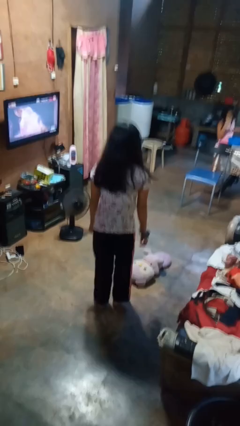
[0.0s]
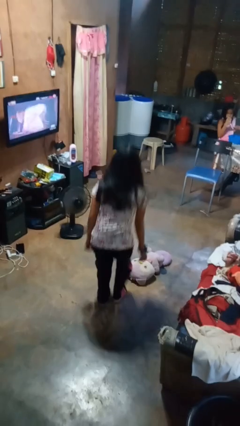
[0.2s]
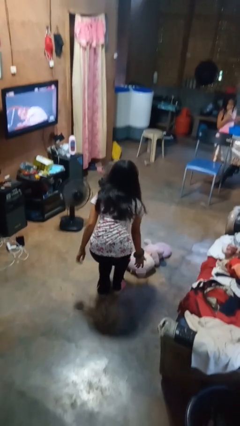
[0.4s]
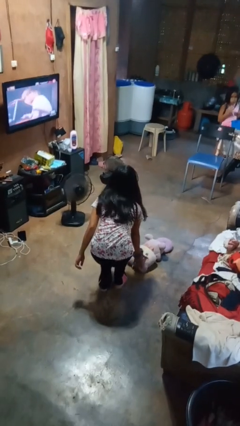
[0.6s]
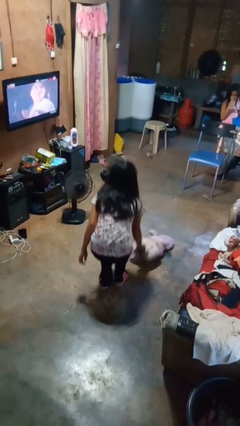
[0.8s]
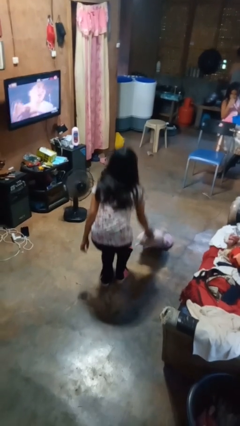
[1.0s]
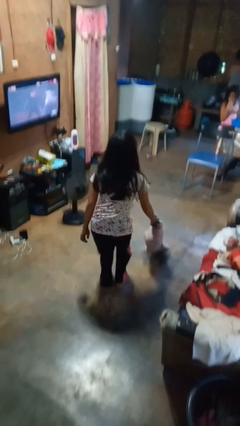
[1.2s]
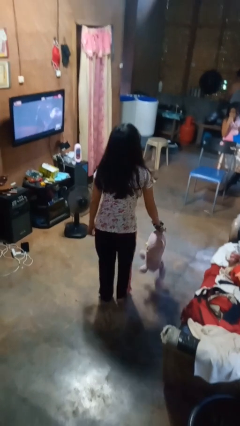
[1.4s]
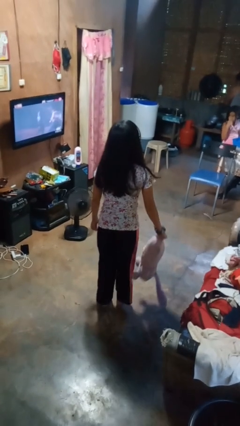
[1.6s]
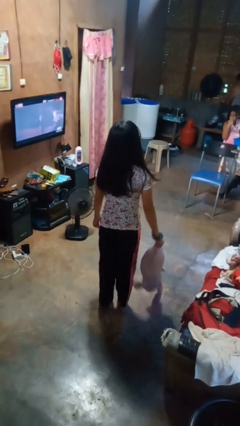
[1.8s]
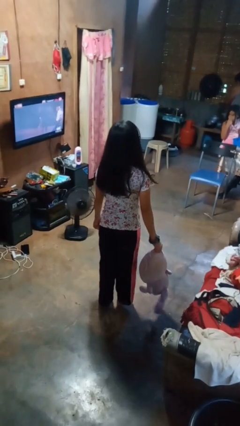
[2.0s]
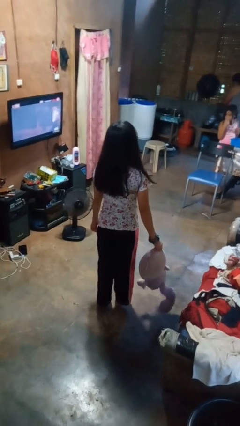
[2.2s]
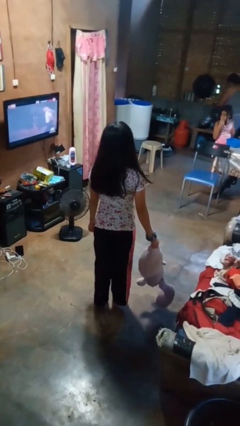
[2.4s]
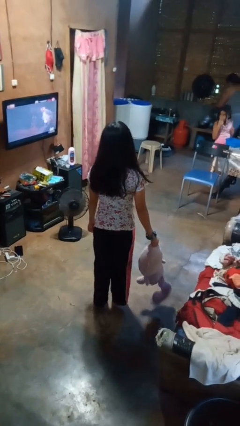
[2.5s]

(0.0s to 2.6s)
person picks up object from floor

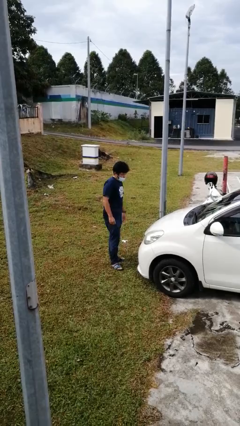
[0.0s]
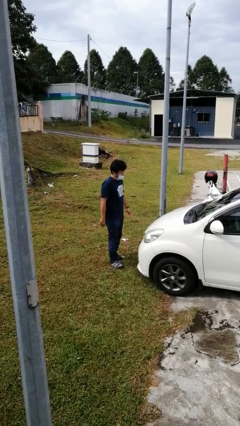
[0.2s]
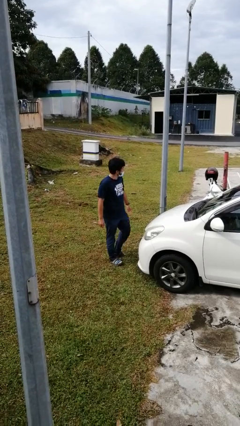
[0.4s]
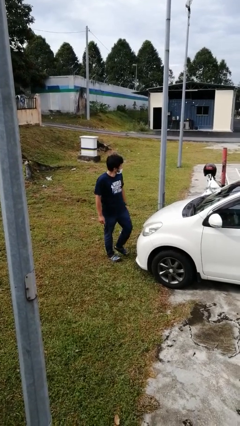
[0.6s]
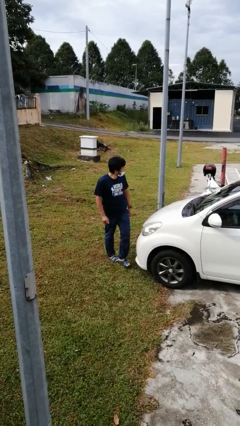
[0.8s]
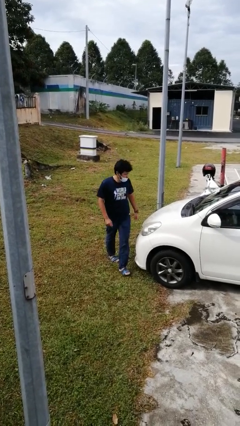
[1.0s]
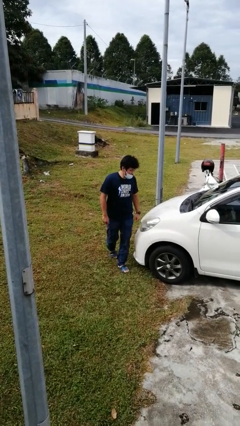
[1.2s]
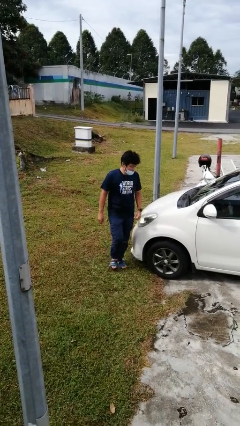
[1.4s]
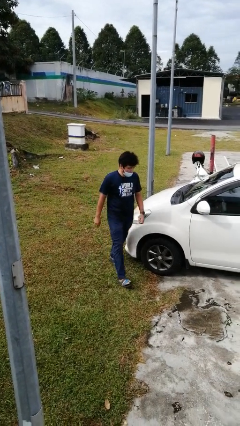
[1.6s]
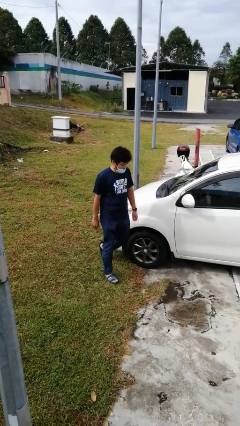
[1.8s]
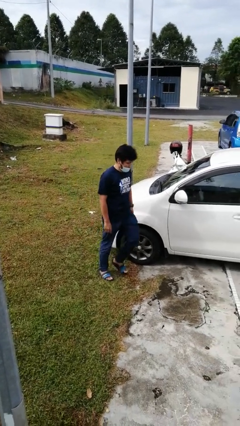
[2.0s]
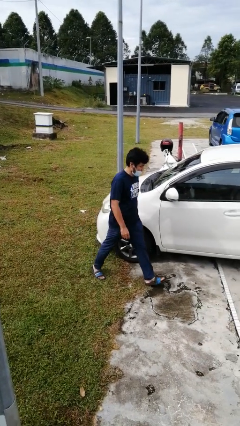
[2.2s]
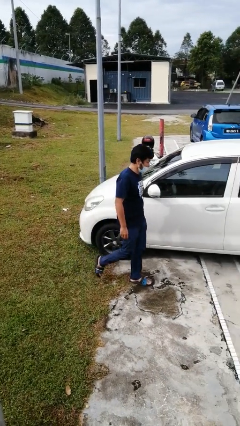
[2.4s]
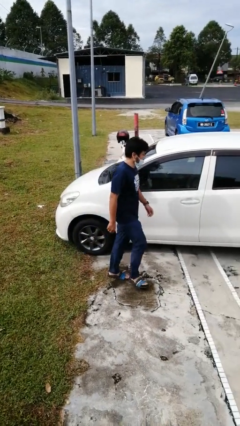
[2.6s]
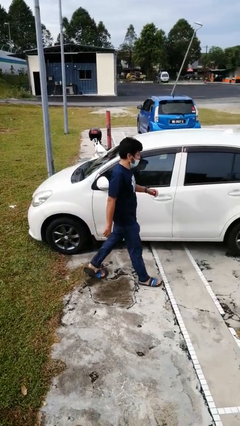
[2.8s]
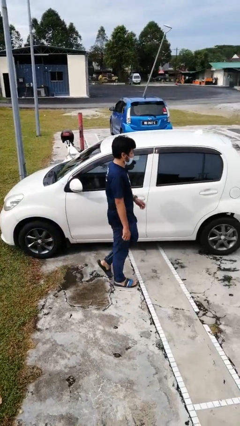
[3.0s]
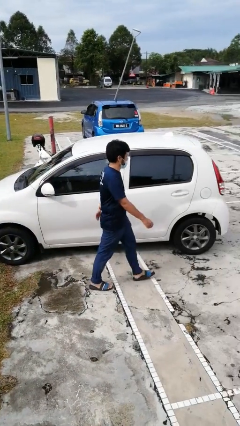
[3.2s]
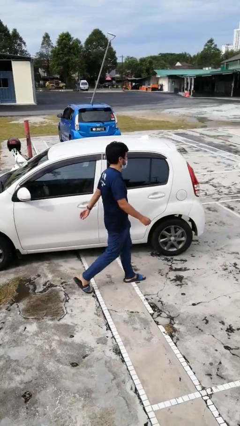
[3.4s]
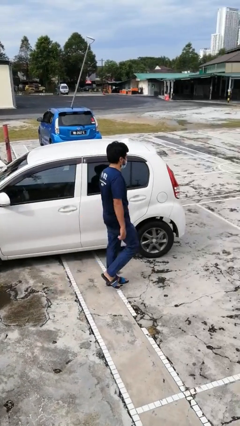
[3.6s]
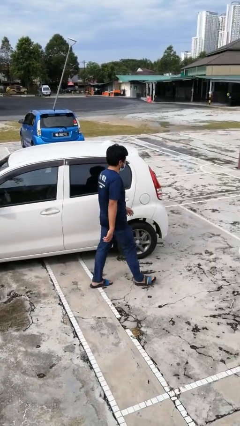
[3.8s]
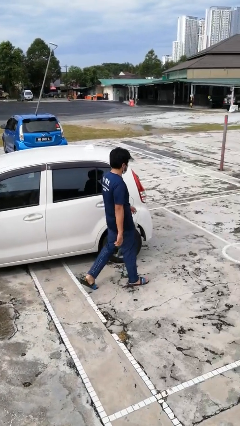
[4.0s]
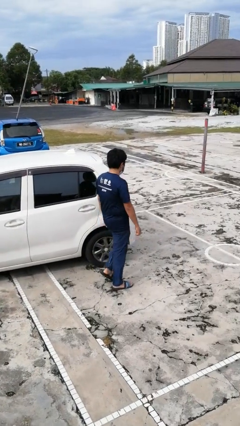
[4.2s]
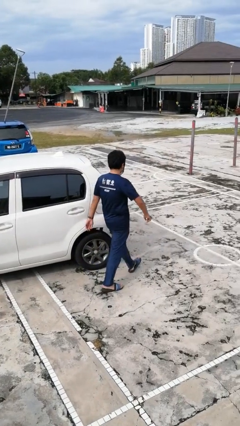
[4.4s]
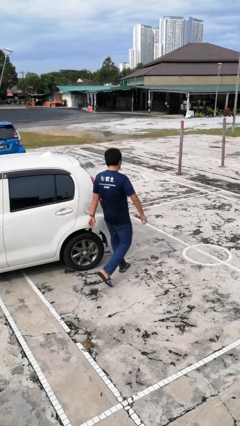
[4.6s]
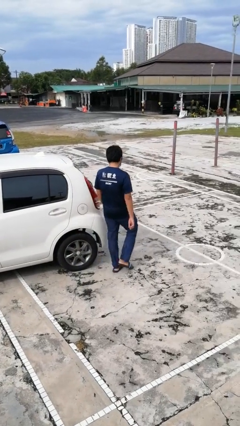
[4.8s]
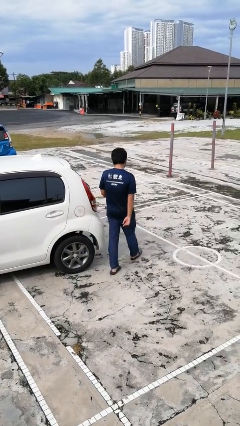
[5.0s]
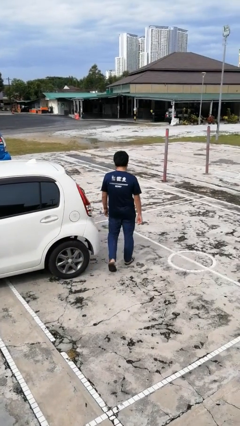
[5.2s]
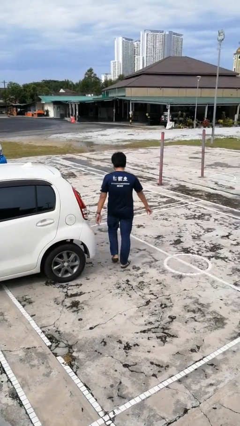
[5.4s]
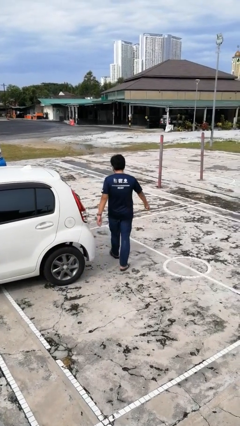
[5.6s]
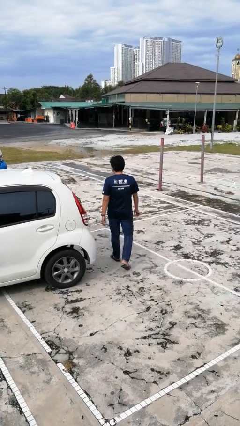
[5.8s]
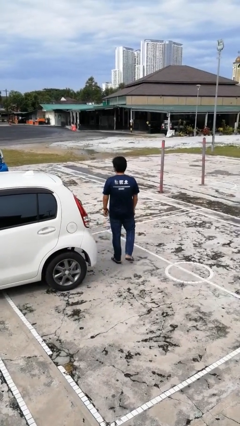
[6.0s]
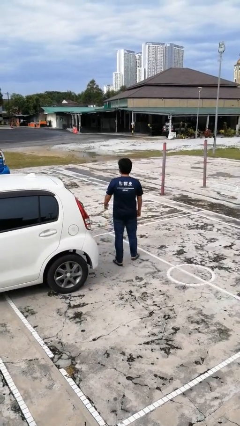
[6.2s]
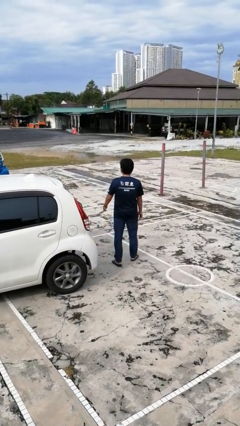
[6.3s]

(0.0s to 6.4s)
person walks around car

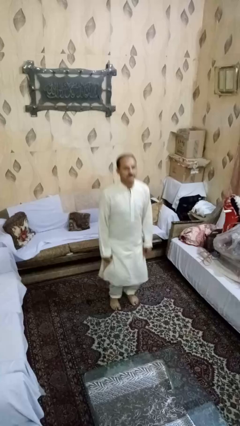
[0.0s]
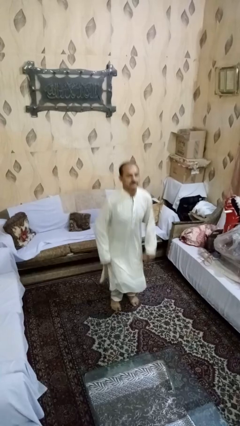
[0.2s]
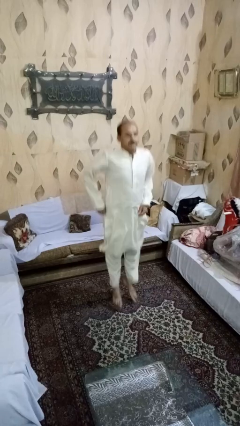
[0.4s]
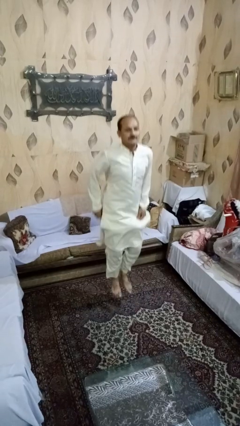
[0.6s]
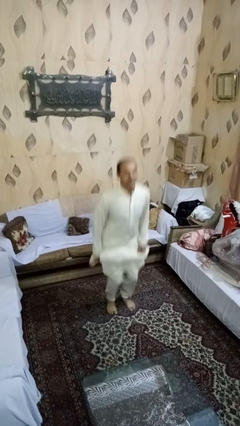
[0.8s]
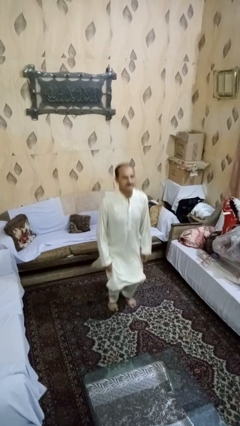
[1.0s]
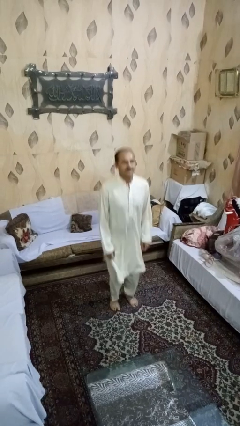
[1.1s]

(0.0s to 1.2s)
person jumps

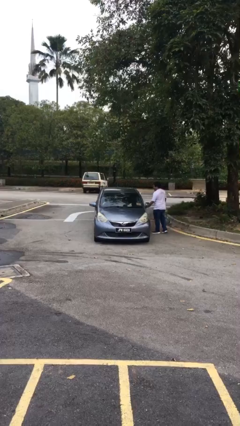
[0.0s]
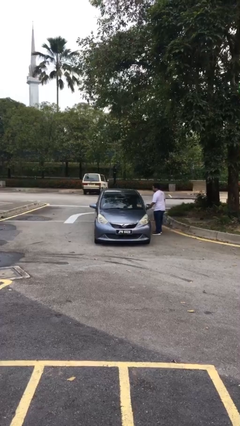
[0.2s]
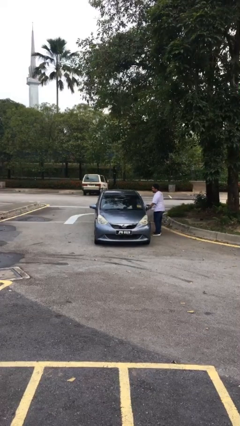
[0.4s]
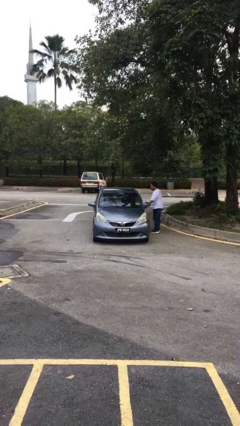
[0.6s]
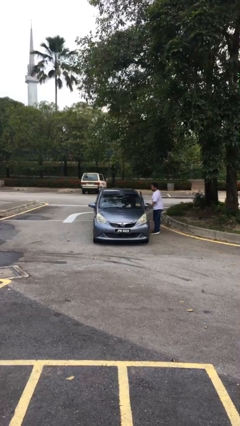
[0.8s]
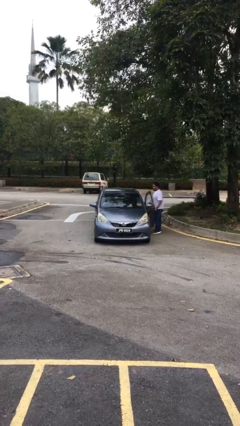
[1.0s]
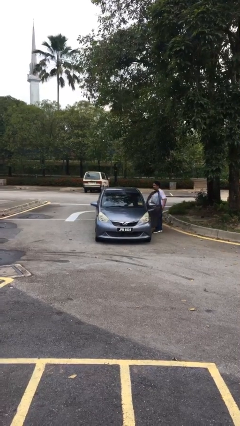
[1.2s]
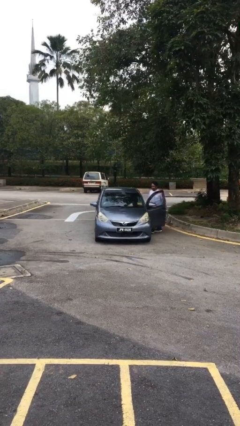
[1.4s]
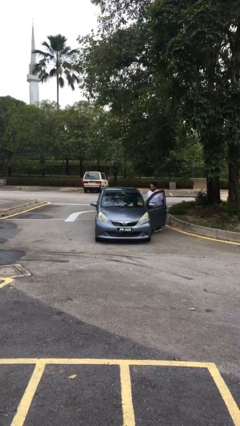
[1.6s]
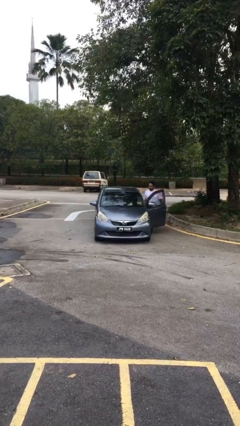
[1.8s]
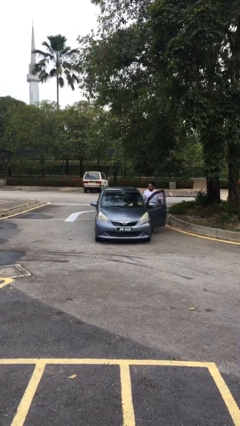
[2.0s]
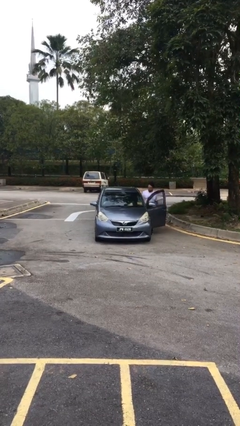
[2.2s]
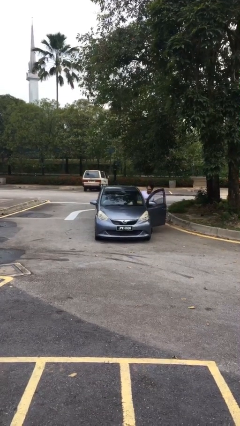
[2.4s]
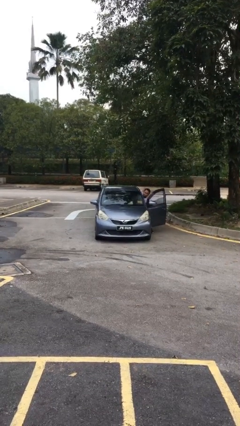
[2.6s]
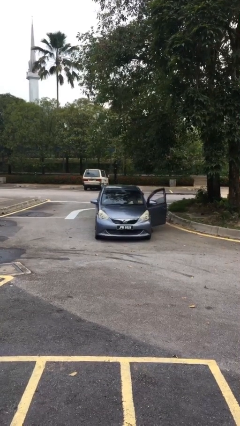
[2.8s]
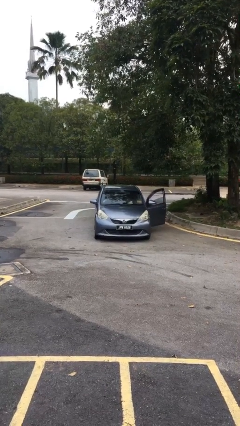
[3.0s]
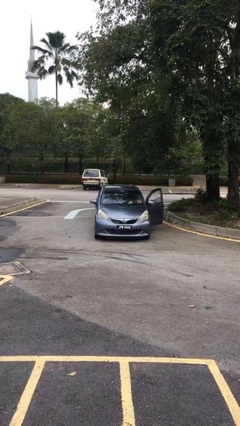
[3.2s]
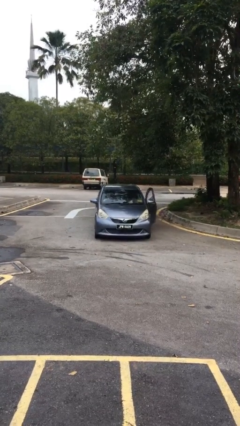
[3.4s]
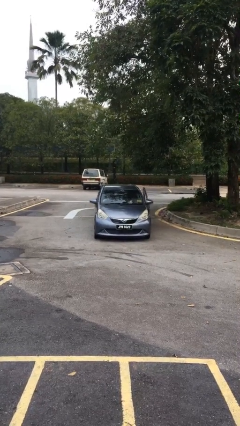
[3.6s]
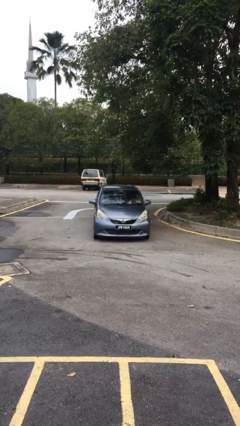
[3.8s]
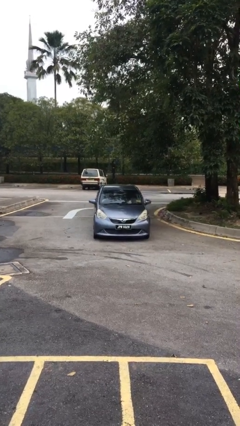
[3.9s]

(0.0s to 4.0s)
car picks up person

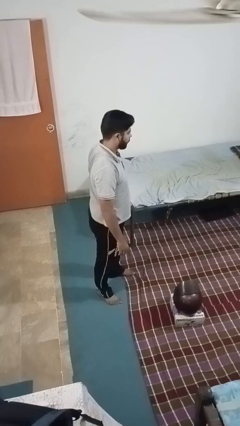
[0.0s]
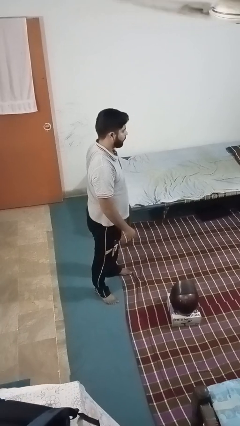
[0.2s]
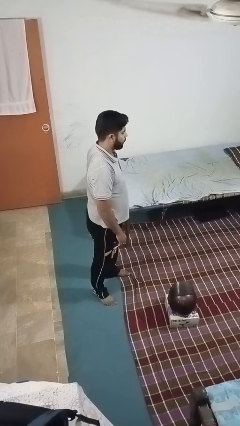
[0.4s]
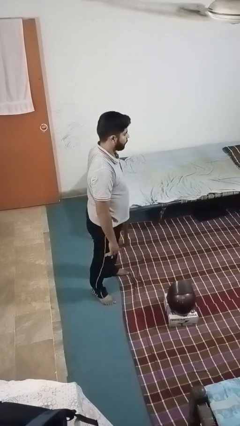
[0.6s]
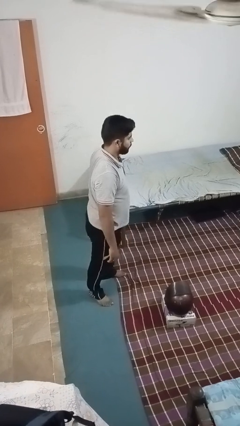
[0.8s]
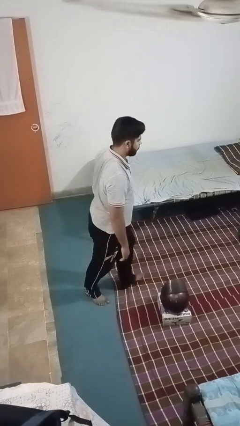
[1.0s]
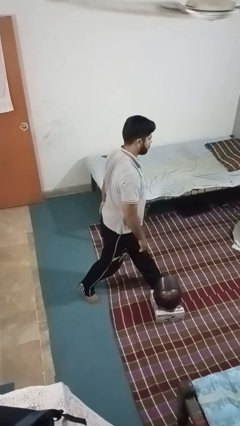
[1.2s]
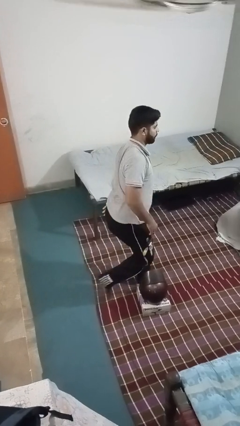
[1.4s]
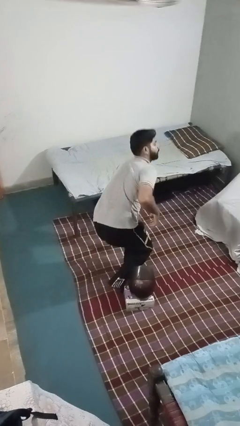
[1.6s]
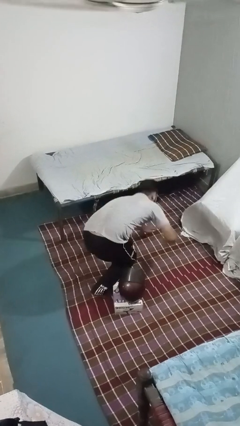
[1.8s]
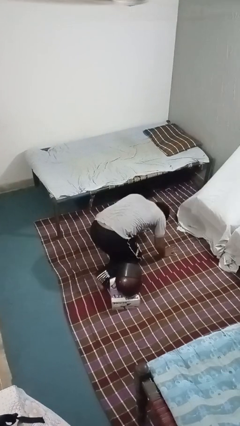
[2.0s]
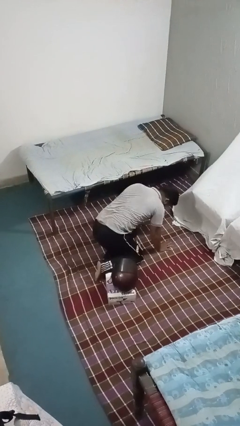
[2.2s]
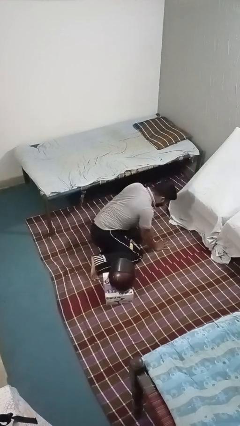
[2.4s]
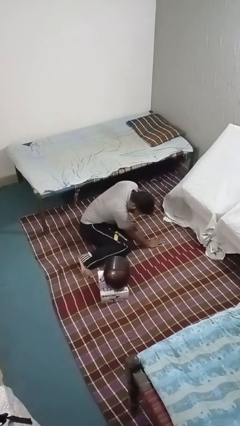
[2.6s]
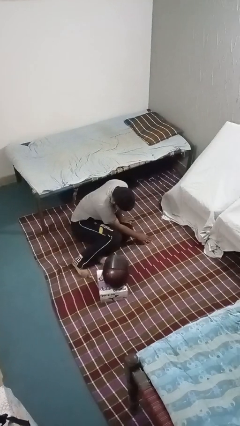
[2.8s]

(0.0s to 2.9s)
person trips on object on floor

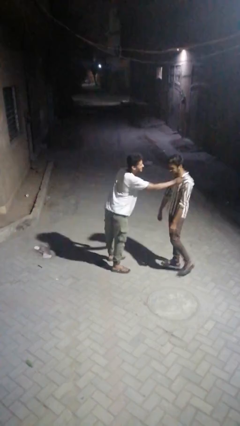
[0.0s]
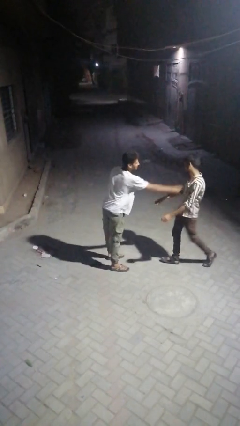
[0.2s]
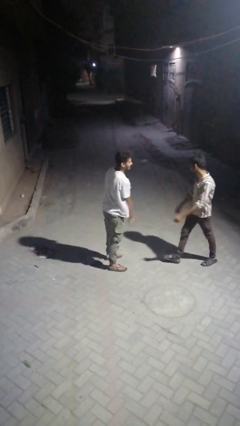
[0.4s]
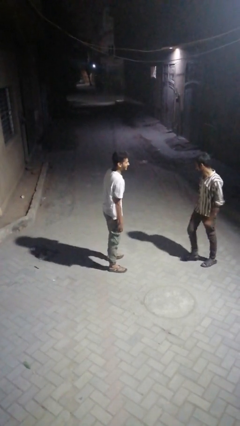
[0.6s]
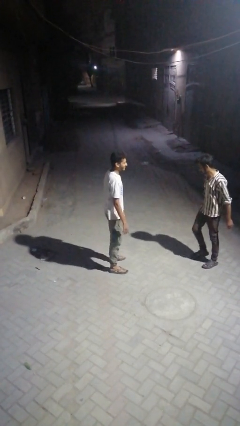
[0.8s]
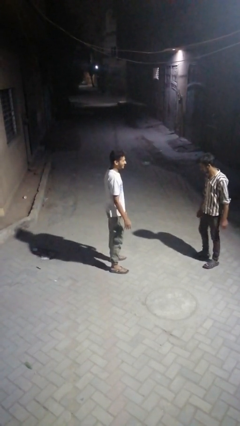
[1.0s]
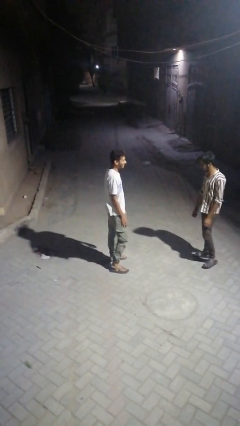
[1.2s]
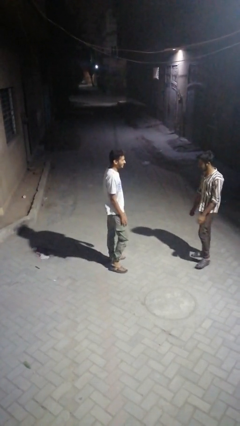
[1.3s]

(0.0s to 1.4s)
person shoves person
